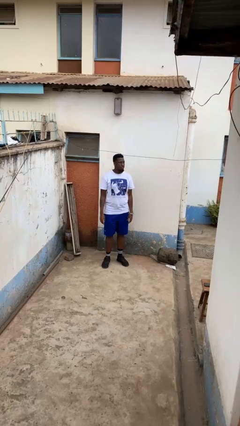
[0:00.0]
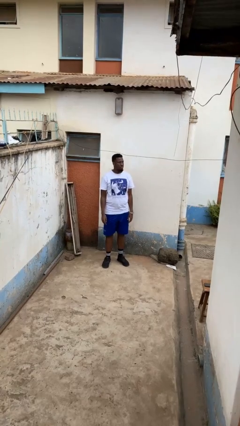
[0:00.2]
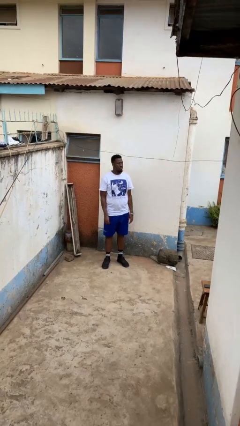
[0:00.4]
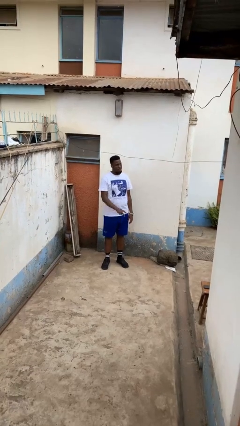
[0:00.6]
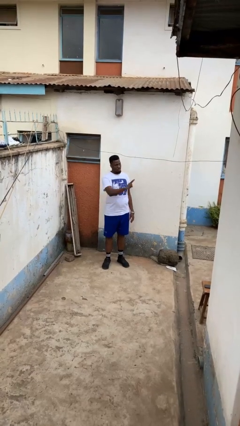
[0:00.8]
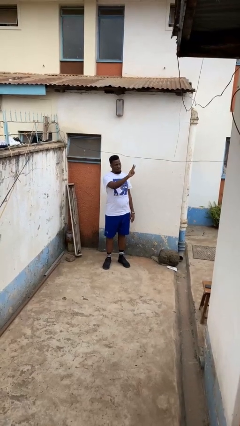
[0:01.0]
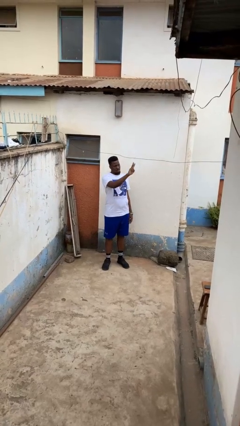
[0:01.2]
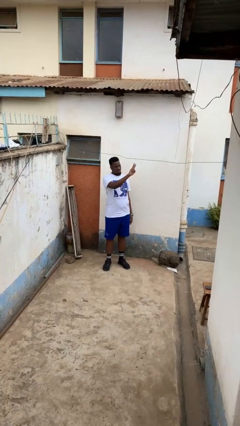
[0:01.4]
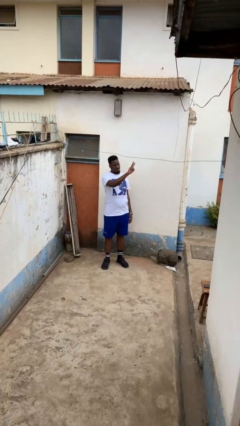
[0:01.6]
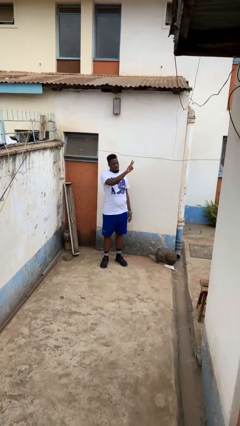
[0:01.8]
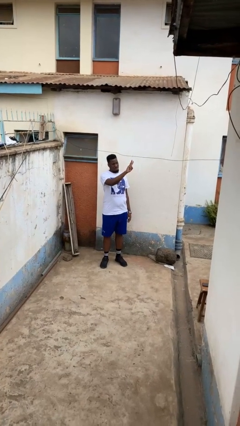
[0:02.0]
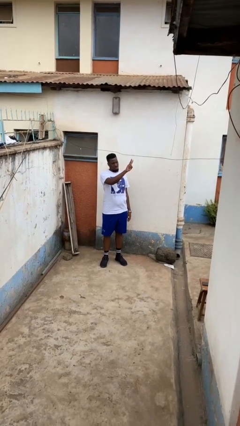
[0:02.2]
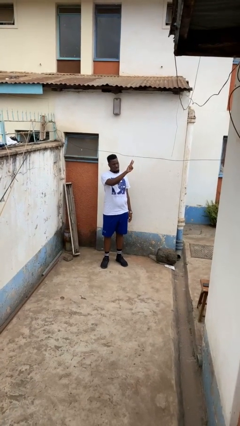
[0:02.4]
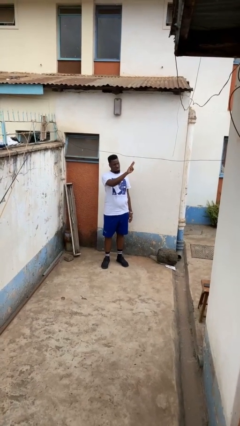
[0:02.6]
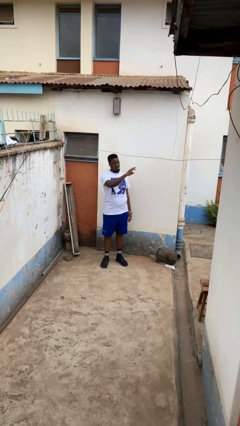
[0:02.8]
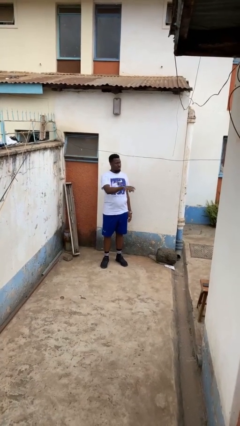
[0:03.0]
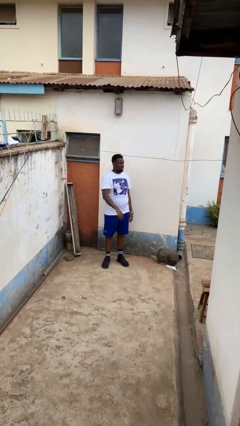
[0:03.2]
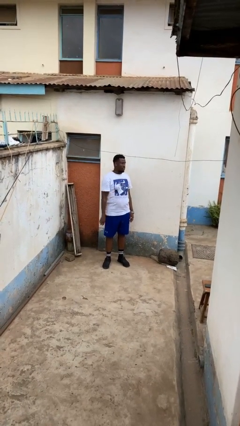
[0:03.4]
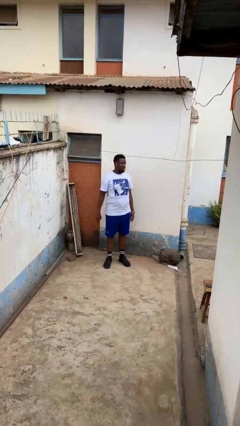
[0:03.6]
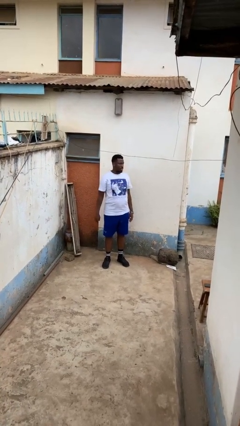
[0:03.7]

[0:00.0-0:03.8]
person gestures peace

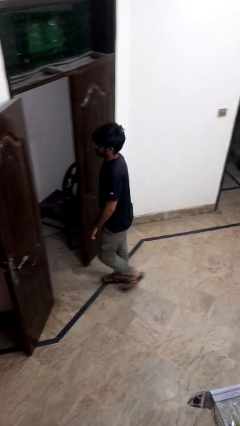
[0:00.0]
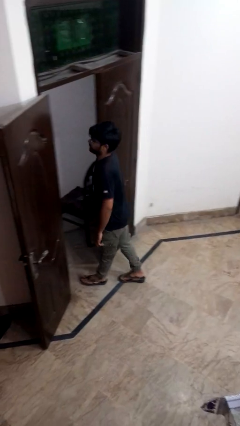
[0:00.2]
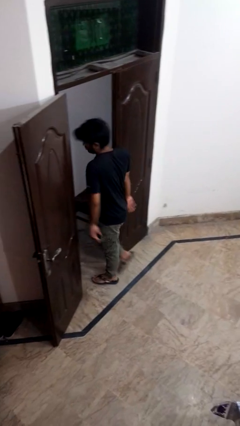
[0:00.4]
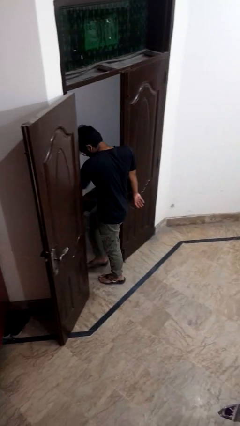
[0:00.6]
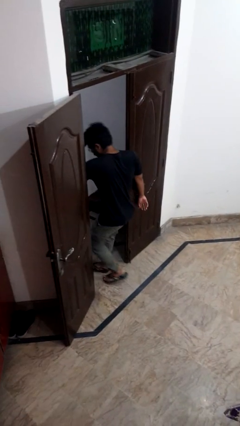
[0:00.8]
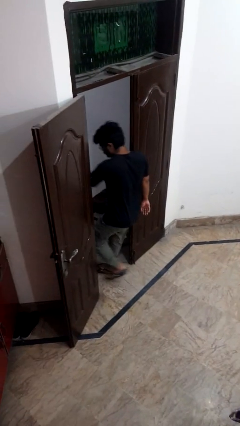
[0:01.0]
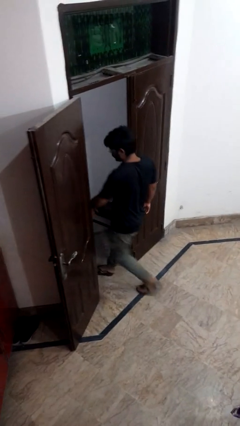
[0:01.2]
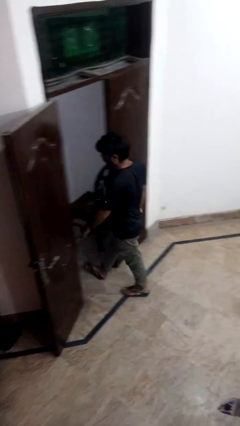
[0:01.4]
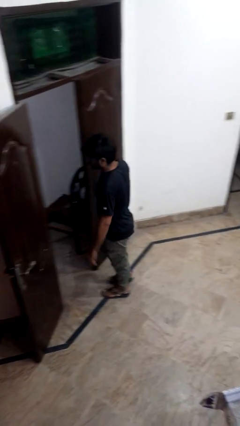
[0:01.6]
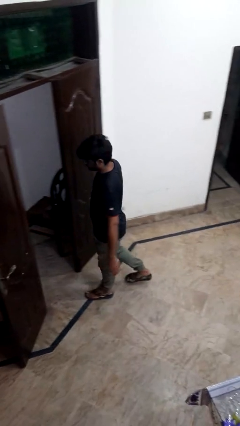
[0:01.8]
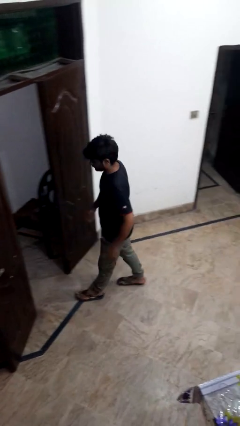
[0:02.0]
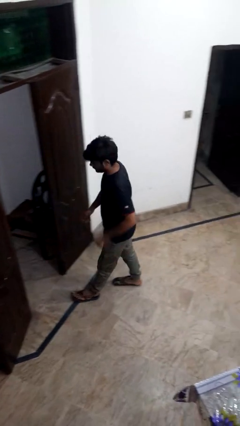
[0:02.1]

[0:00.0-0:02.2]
person bumps into wall

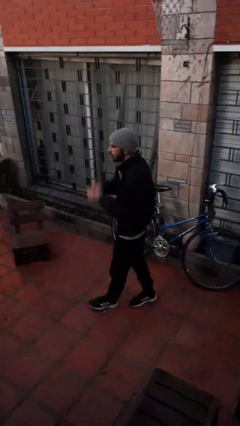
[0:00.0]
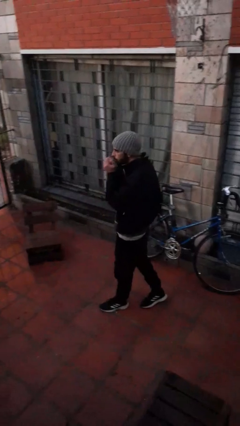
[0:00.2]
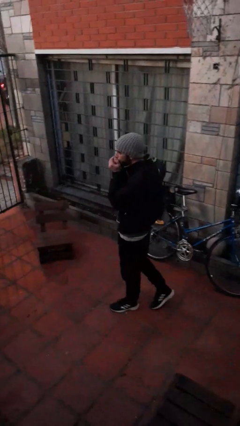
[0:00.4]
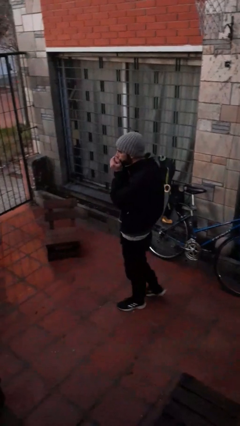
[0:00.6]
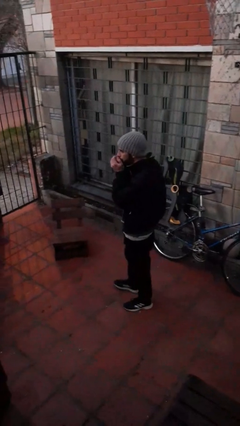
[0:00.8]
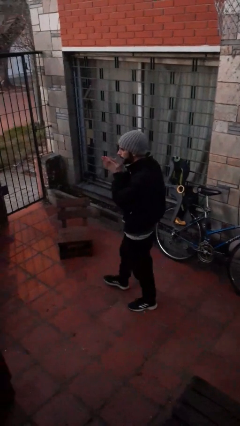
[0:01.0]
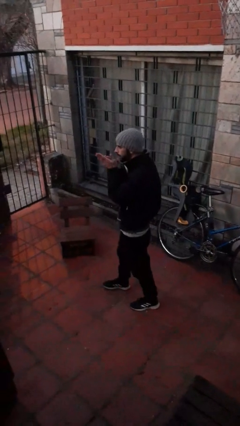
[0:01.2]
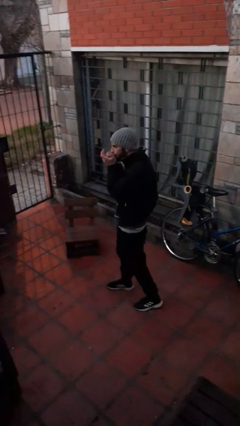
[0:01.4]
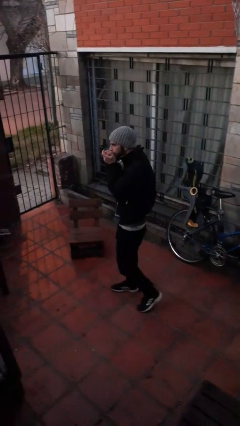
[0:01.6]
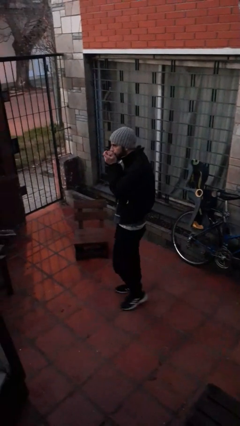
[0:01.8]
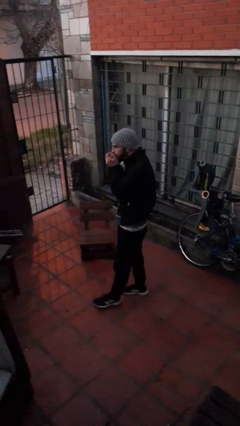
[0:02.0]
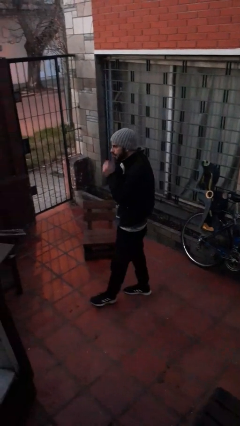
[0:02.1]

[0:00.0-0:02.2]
person blows into hands

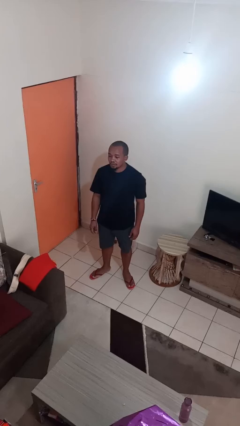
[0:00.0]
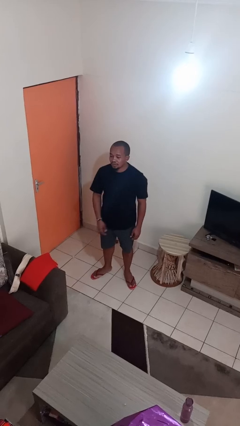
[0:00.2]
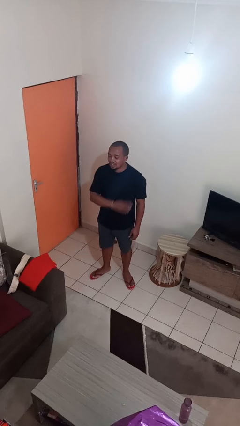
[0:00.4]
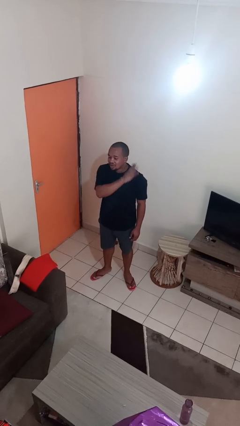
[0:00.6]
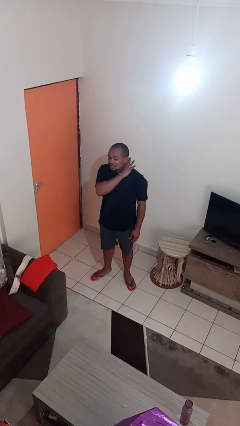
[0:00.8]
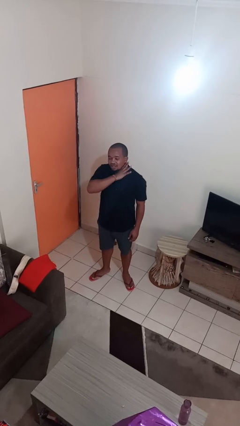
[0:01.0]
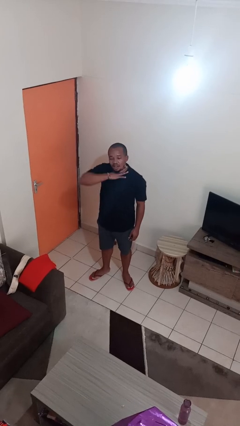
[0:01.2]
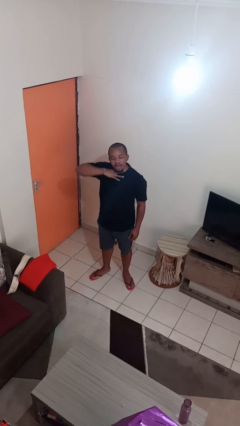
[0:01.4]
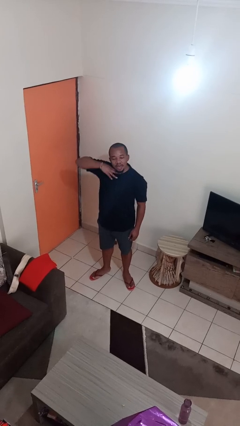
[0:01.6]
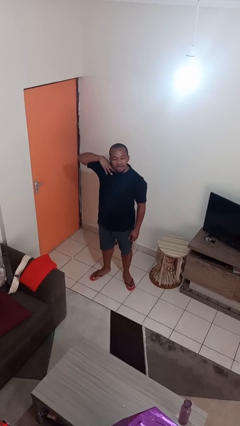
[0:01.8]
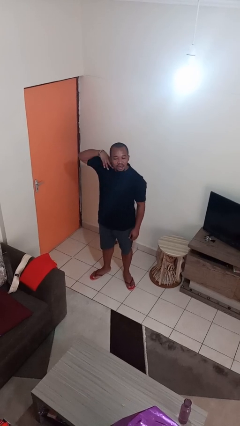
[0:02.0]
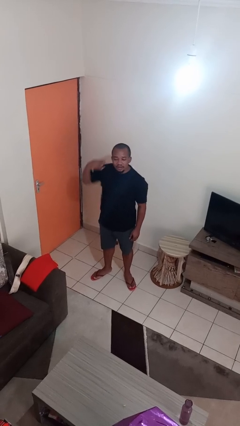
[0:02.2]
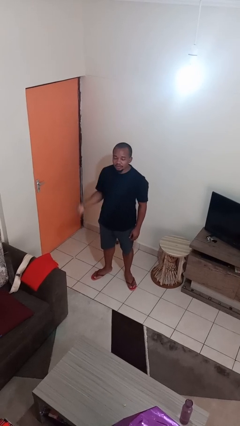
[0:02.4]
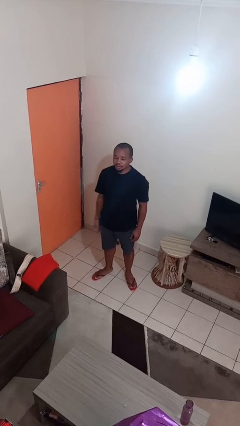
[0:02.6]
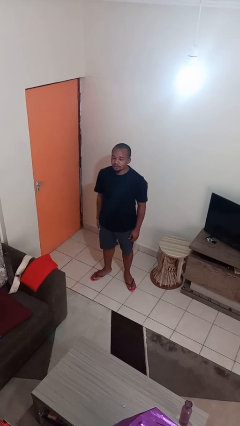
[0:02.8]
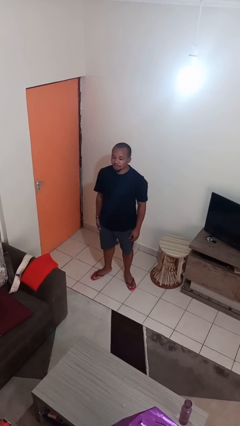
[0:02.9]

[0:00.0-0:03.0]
person gestures cut

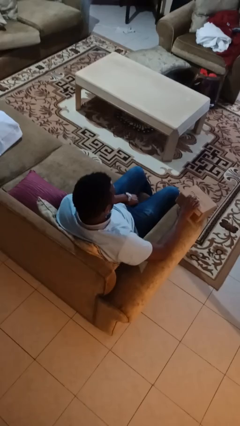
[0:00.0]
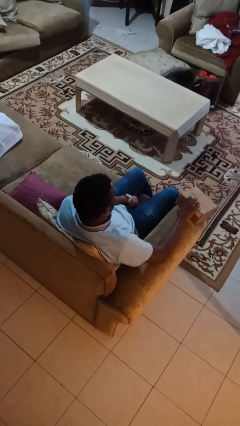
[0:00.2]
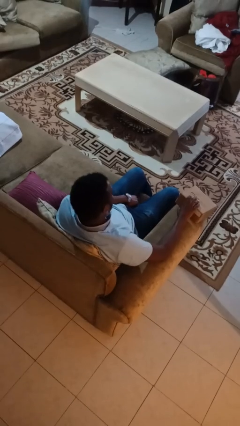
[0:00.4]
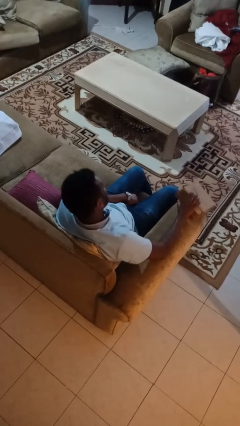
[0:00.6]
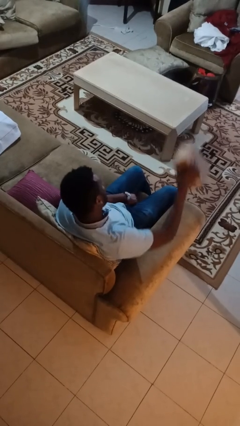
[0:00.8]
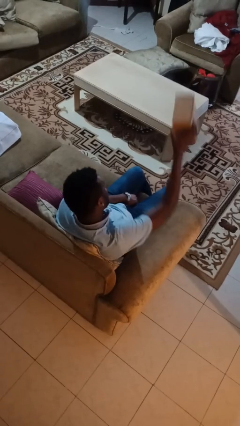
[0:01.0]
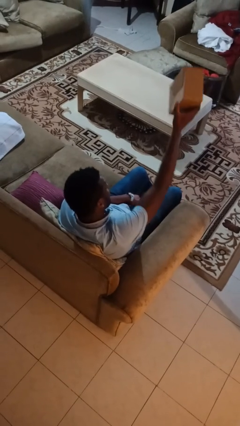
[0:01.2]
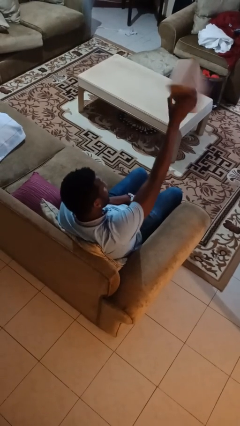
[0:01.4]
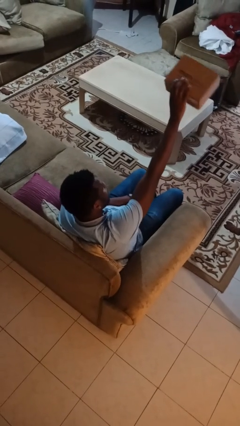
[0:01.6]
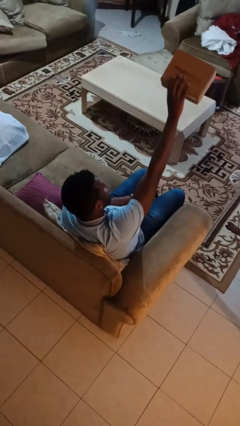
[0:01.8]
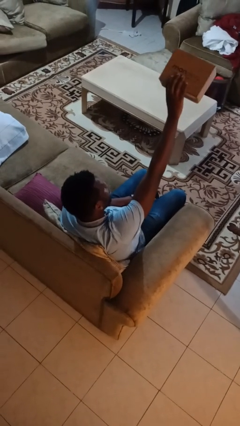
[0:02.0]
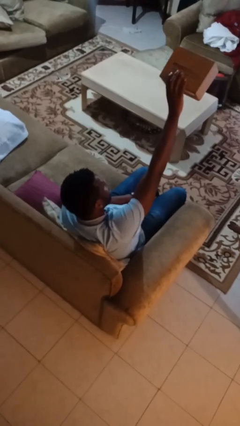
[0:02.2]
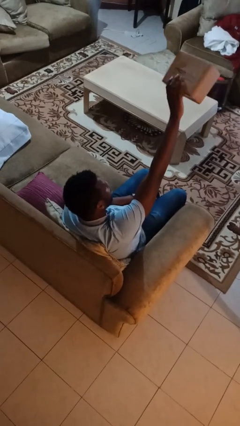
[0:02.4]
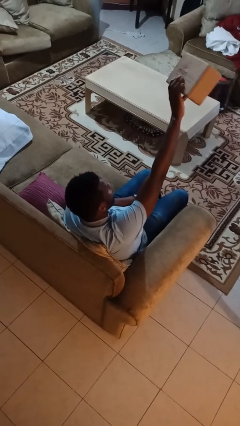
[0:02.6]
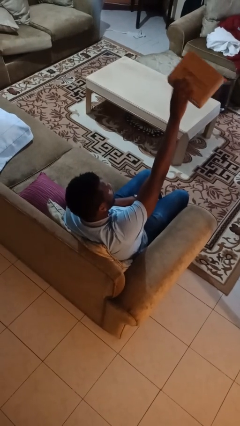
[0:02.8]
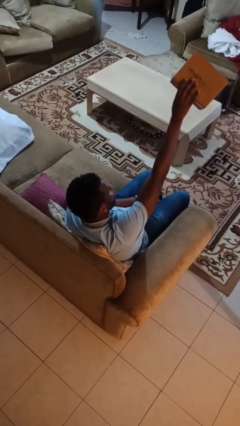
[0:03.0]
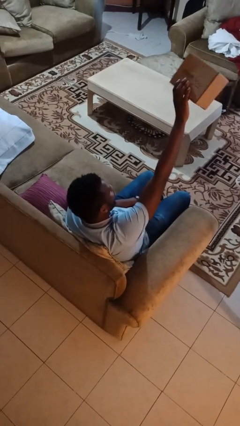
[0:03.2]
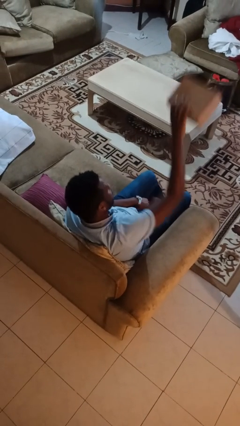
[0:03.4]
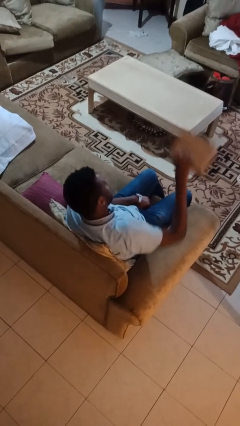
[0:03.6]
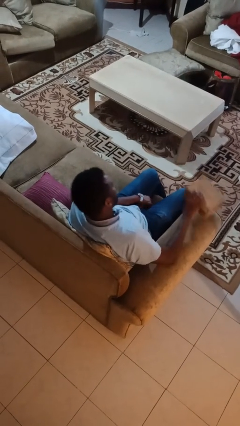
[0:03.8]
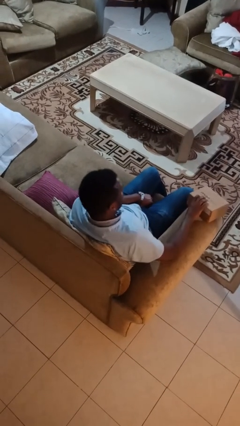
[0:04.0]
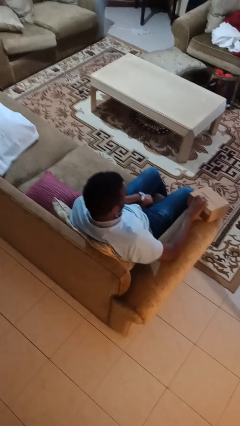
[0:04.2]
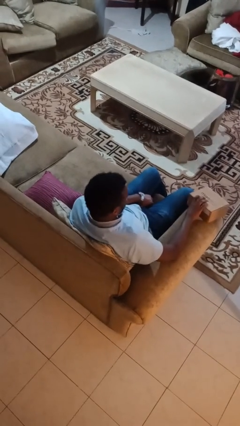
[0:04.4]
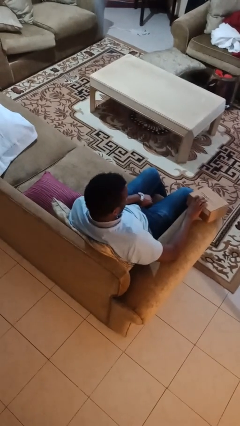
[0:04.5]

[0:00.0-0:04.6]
person holds object above head

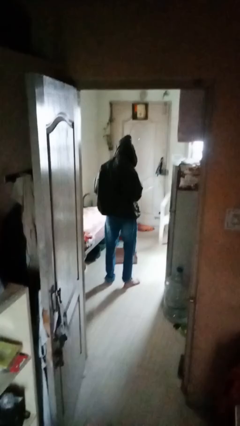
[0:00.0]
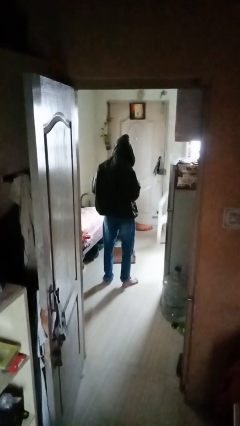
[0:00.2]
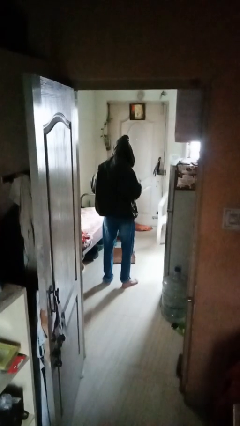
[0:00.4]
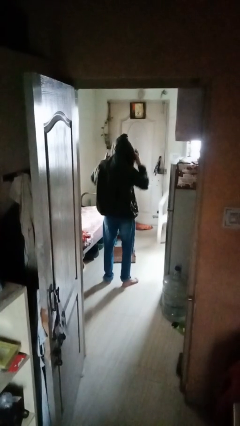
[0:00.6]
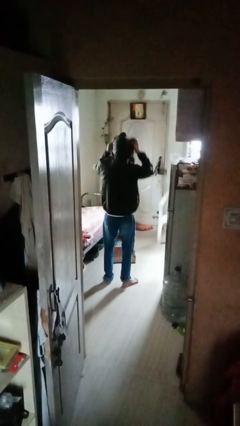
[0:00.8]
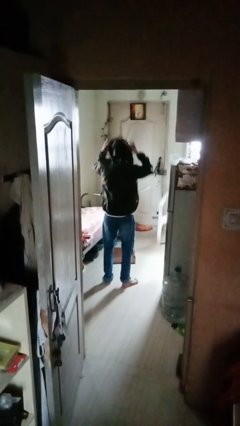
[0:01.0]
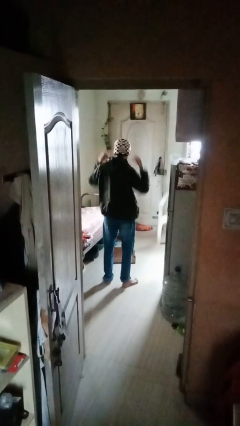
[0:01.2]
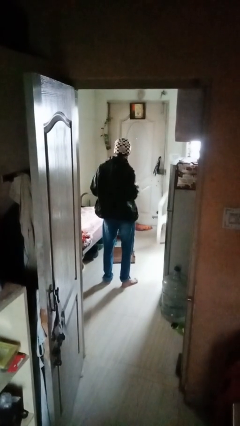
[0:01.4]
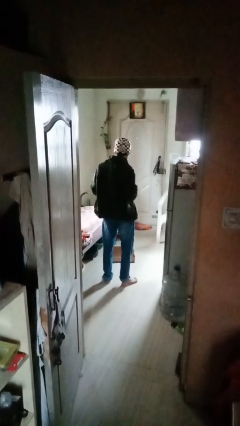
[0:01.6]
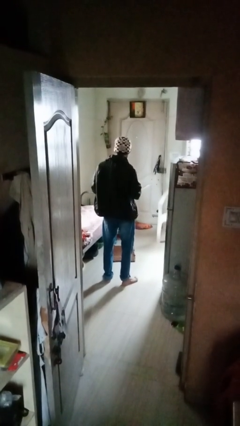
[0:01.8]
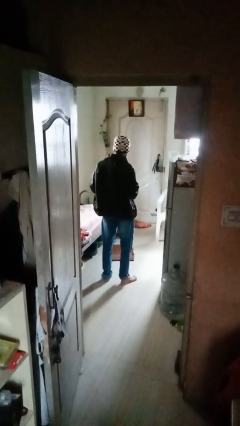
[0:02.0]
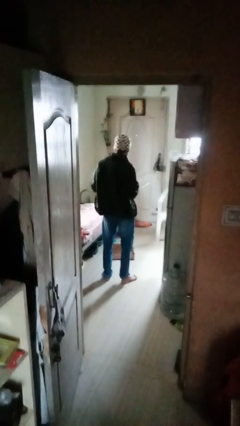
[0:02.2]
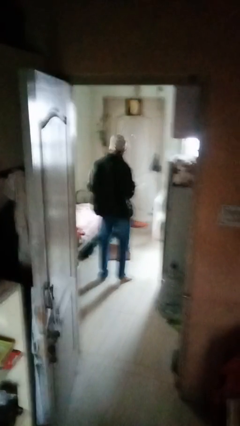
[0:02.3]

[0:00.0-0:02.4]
person takes off hoodie
